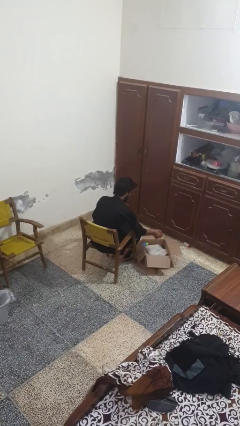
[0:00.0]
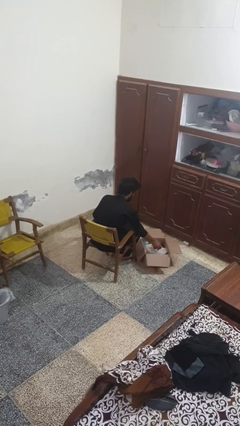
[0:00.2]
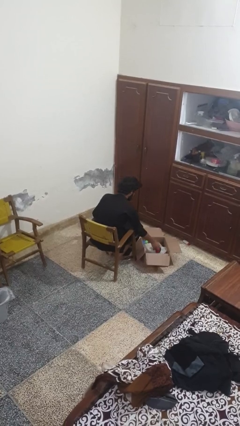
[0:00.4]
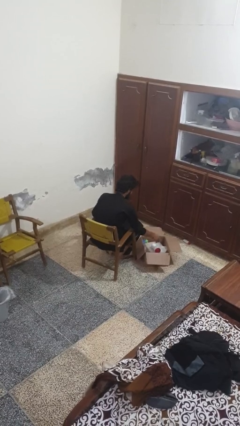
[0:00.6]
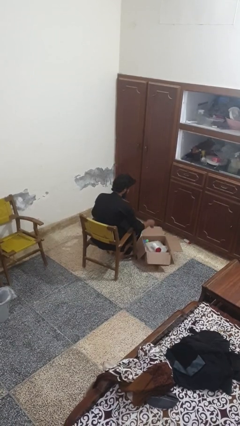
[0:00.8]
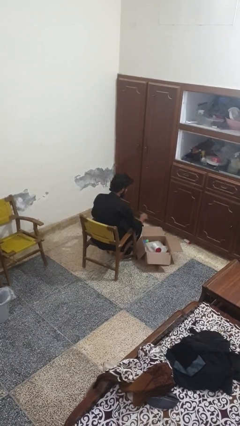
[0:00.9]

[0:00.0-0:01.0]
person puts object into box

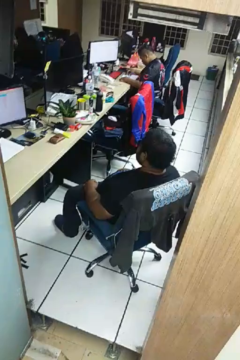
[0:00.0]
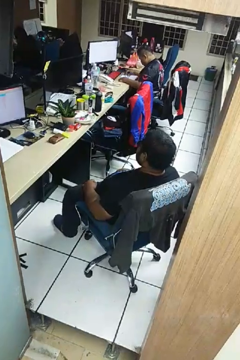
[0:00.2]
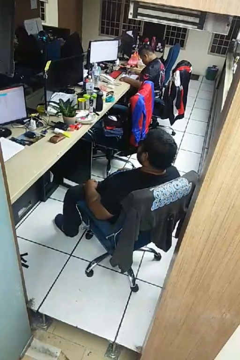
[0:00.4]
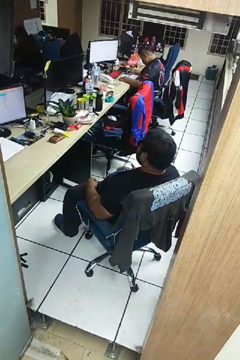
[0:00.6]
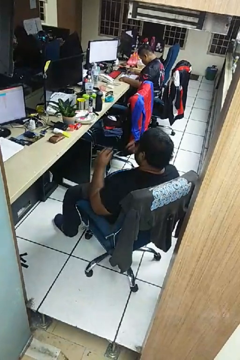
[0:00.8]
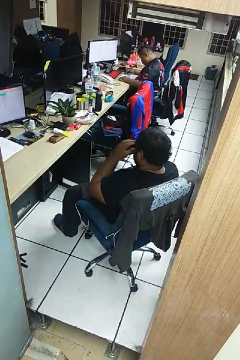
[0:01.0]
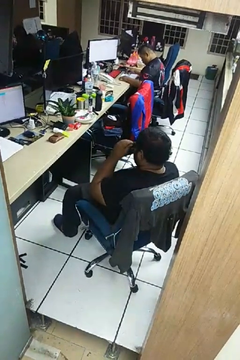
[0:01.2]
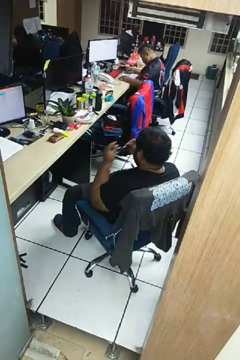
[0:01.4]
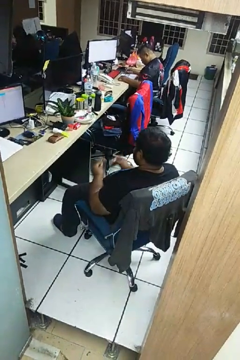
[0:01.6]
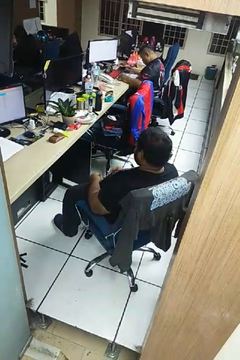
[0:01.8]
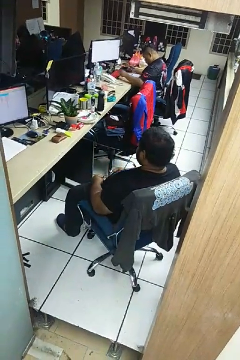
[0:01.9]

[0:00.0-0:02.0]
person takes off sunglasses

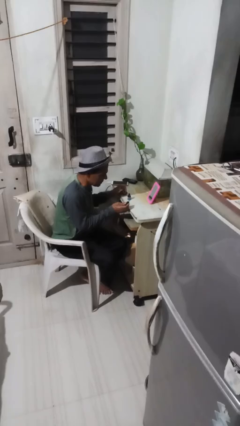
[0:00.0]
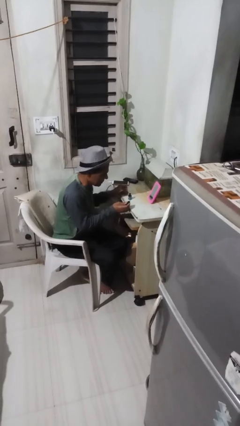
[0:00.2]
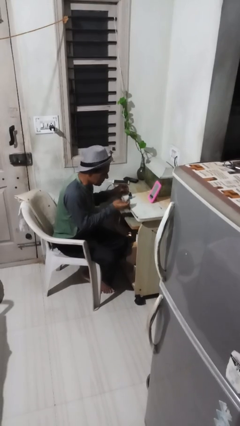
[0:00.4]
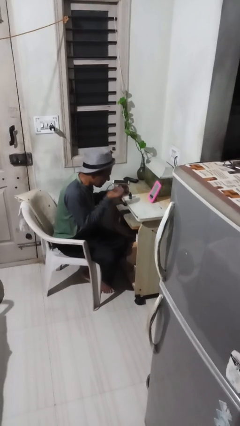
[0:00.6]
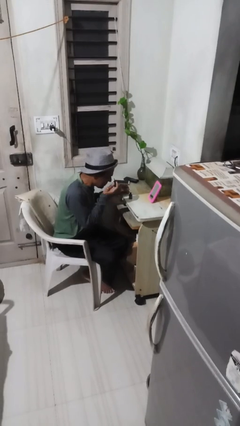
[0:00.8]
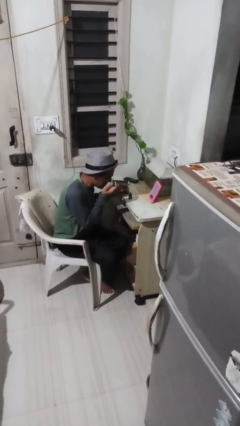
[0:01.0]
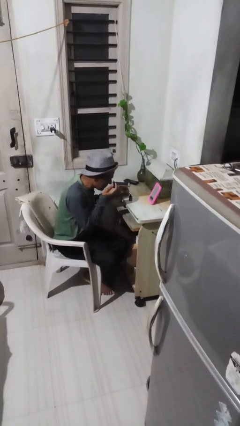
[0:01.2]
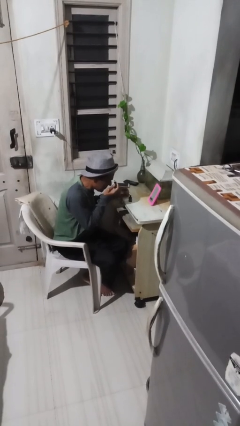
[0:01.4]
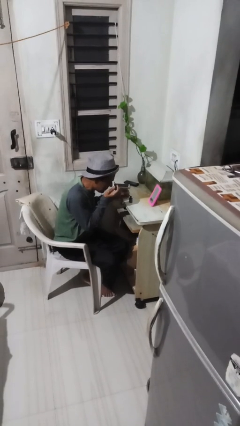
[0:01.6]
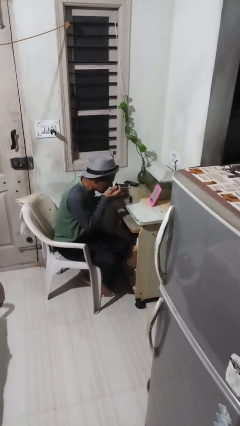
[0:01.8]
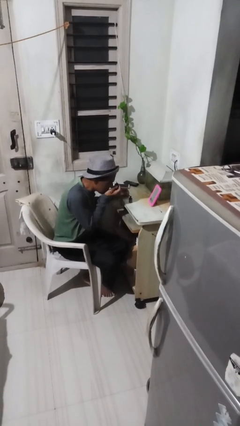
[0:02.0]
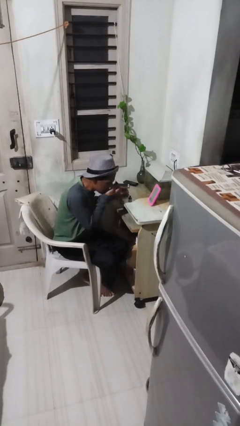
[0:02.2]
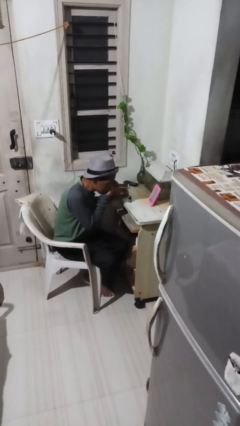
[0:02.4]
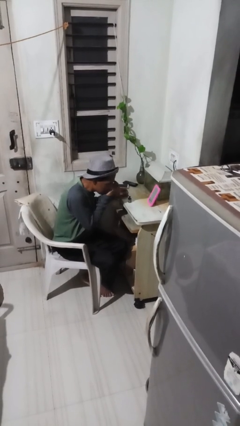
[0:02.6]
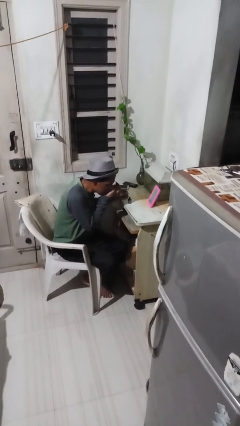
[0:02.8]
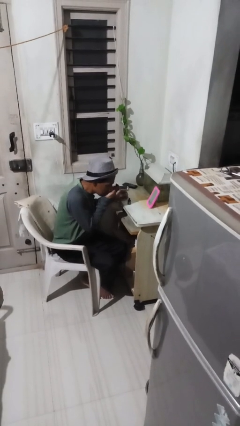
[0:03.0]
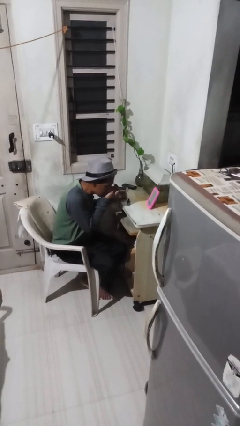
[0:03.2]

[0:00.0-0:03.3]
person applies eye makeup

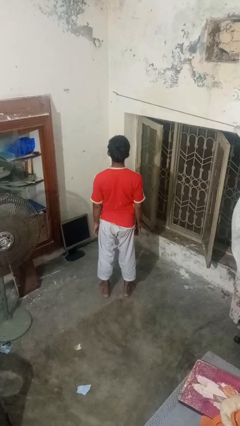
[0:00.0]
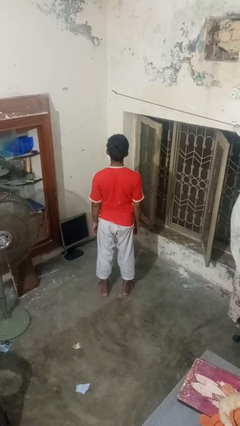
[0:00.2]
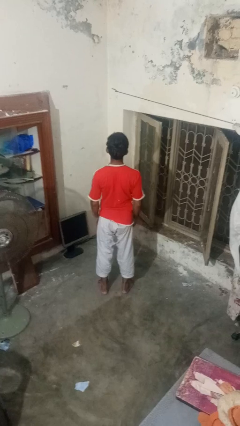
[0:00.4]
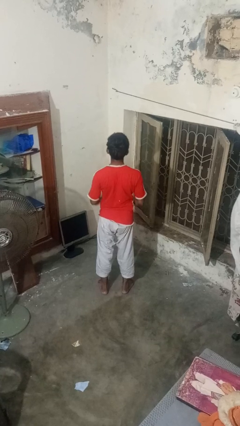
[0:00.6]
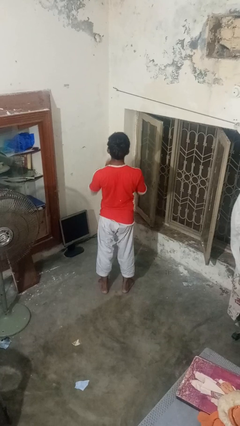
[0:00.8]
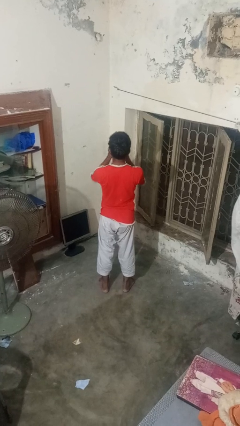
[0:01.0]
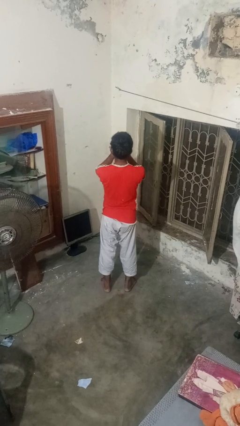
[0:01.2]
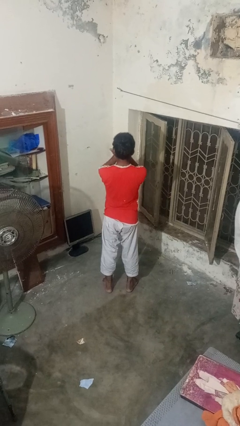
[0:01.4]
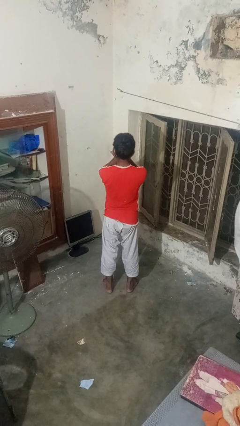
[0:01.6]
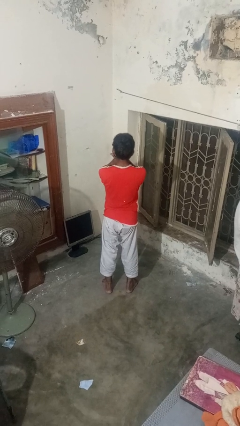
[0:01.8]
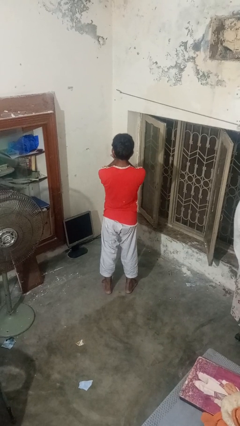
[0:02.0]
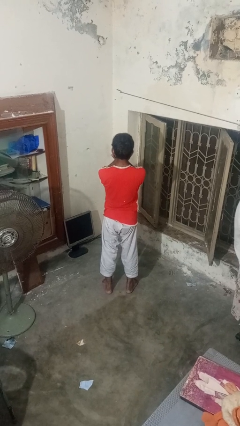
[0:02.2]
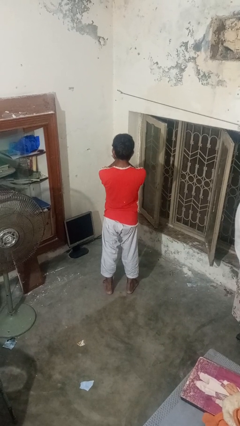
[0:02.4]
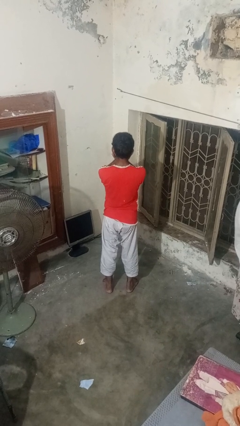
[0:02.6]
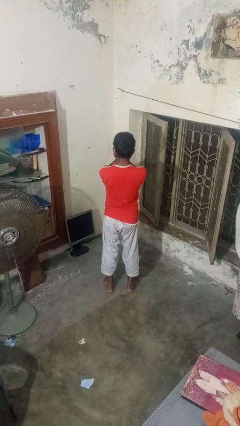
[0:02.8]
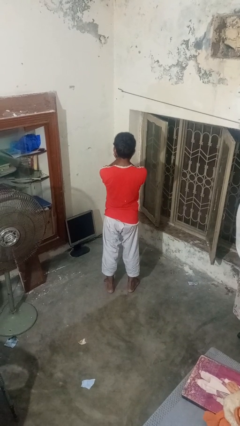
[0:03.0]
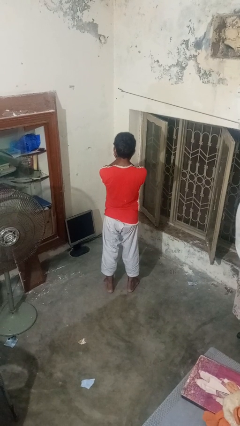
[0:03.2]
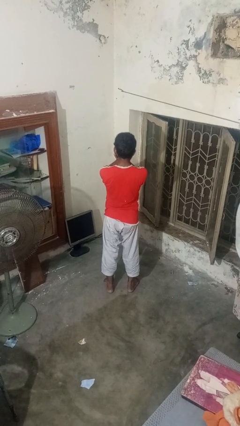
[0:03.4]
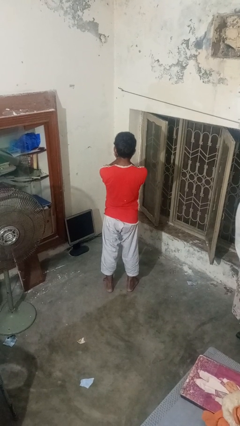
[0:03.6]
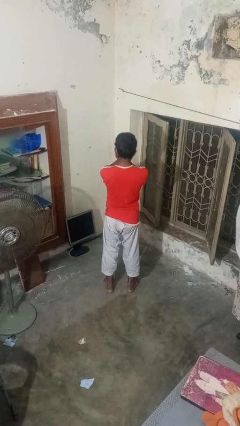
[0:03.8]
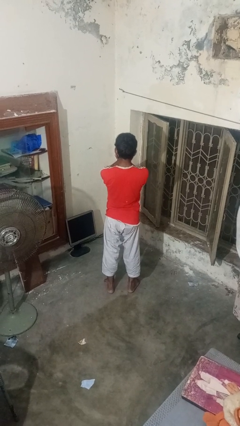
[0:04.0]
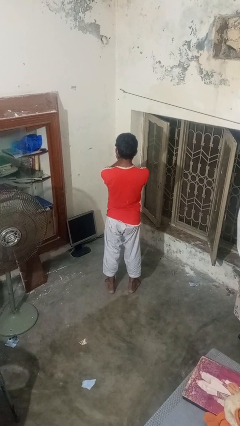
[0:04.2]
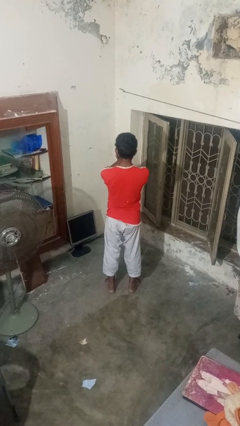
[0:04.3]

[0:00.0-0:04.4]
person covers face with hands

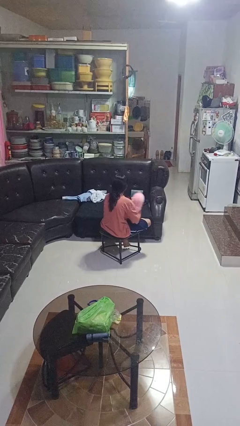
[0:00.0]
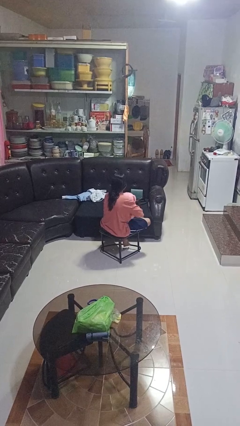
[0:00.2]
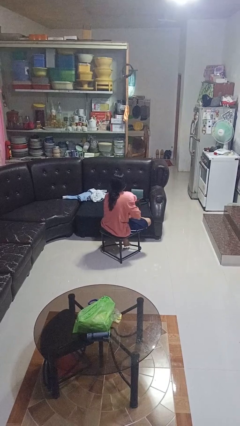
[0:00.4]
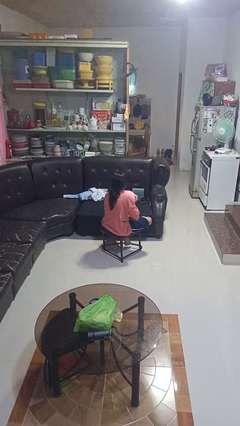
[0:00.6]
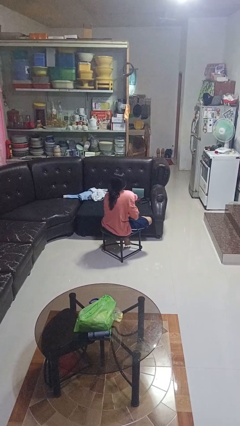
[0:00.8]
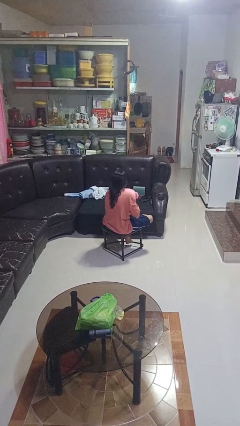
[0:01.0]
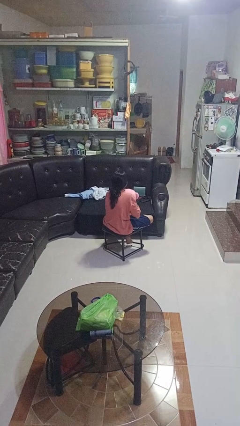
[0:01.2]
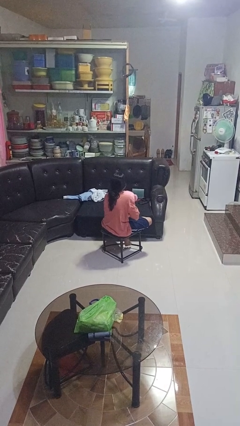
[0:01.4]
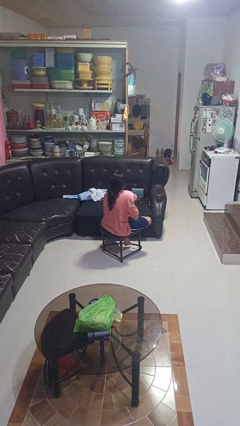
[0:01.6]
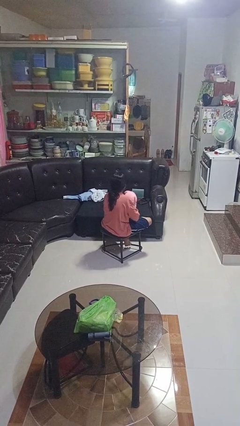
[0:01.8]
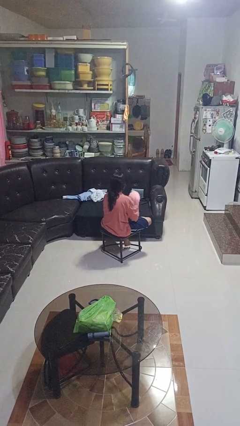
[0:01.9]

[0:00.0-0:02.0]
person hugs stuffed animal

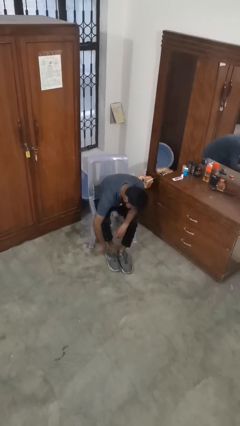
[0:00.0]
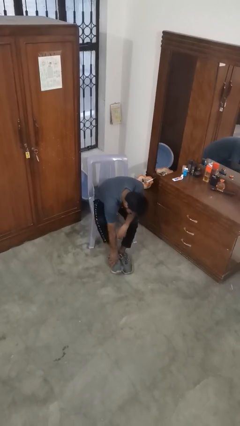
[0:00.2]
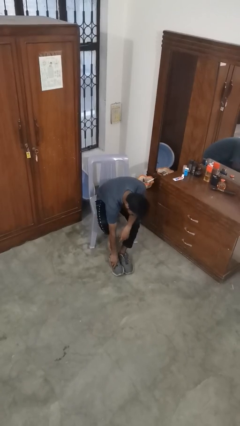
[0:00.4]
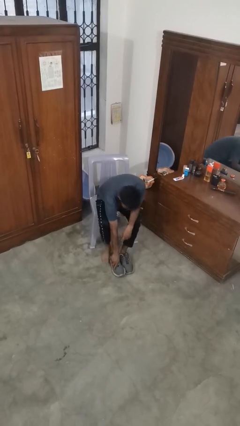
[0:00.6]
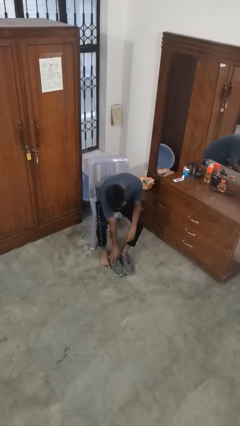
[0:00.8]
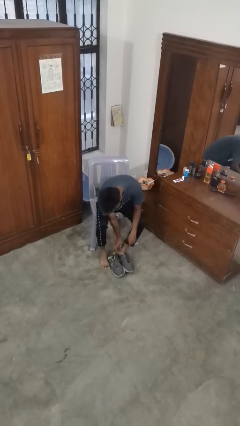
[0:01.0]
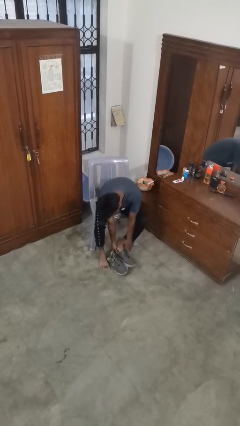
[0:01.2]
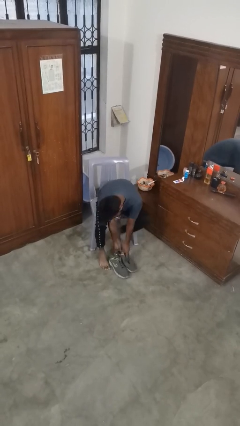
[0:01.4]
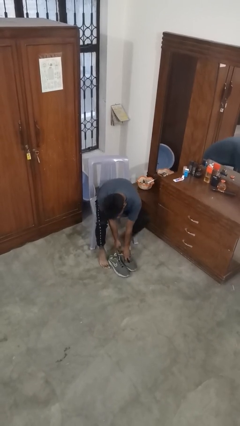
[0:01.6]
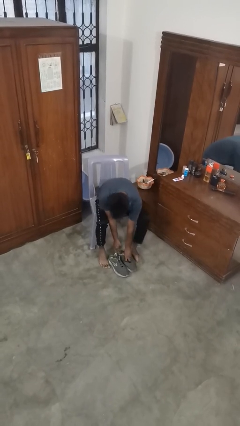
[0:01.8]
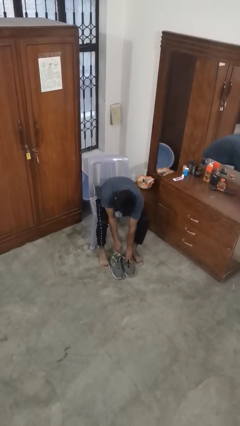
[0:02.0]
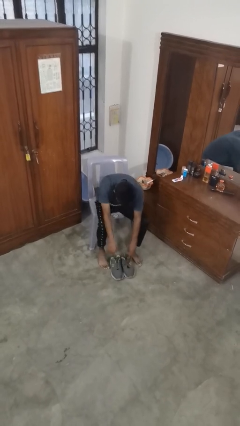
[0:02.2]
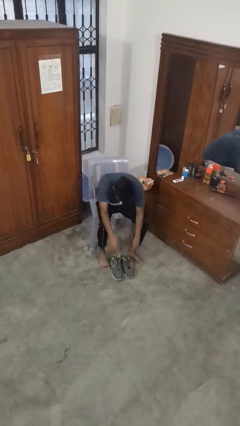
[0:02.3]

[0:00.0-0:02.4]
person takes off shoes

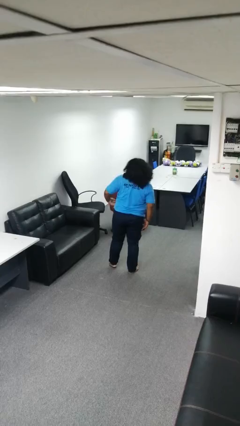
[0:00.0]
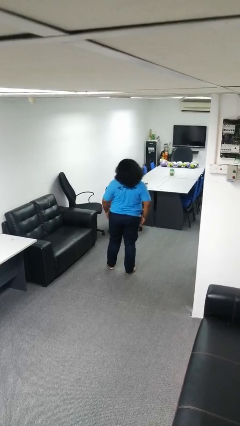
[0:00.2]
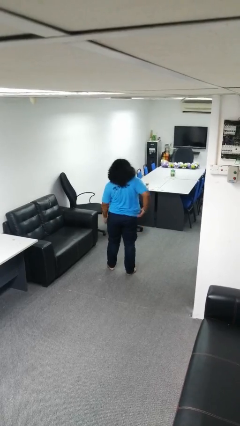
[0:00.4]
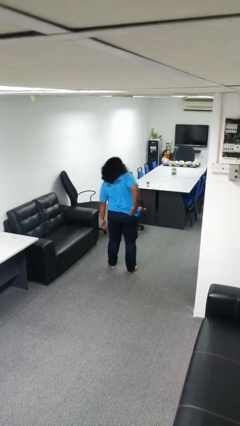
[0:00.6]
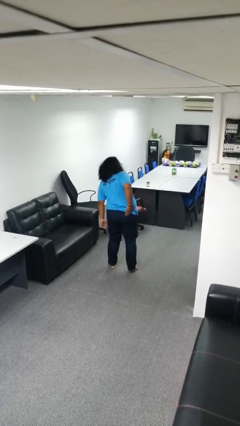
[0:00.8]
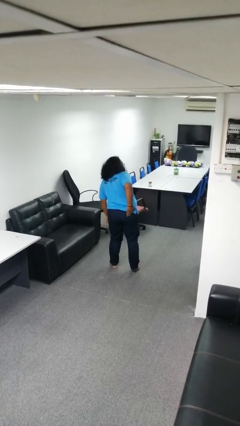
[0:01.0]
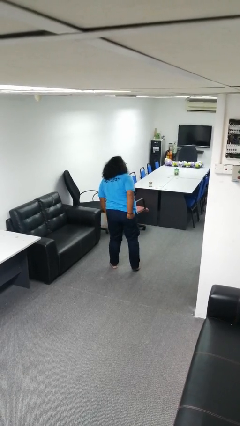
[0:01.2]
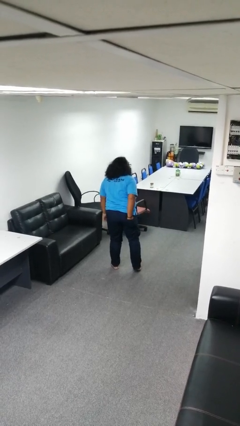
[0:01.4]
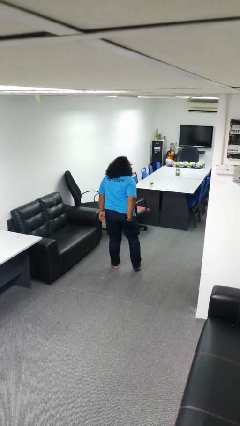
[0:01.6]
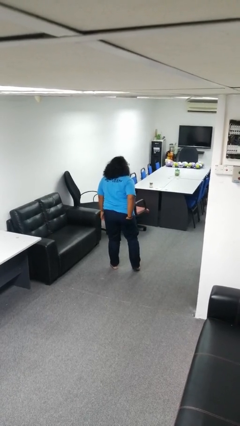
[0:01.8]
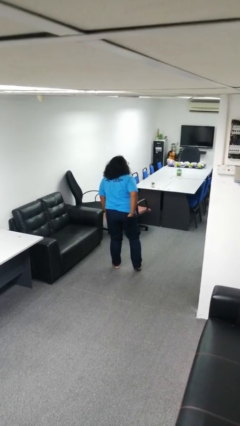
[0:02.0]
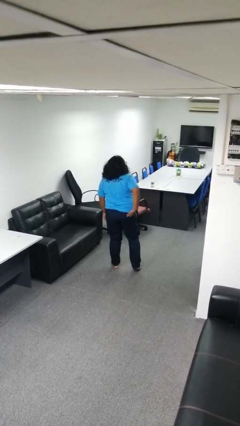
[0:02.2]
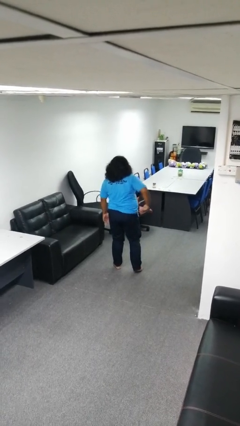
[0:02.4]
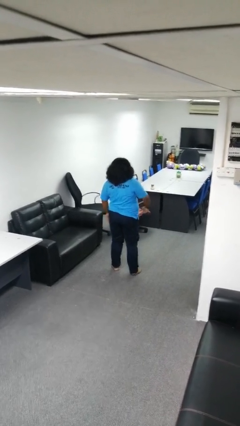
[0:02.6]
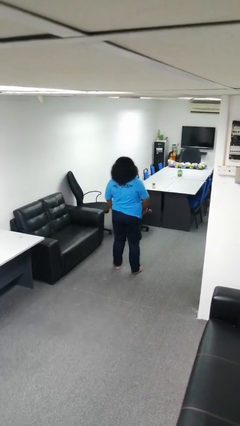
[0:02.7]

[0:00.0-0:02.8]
person puts hands in back pockets
